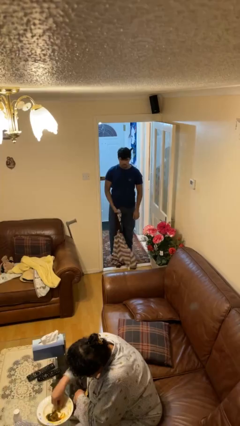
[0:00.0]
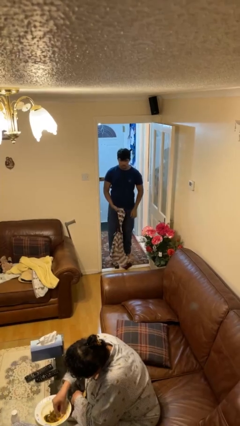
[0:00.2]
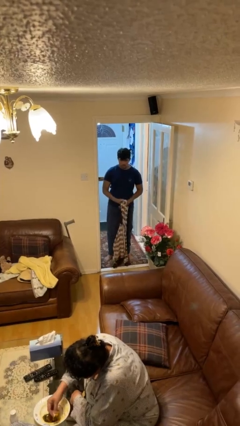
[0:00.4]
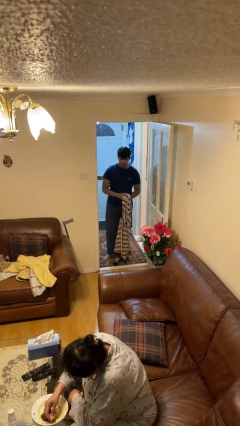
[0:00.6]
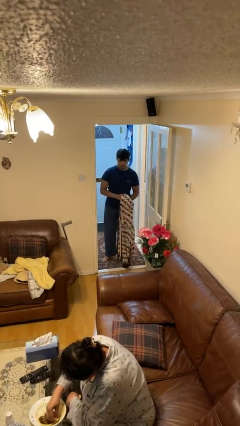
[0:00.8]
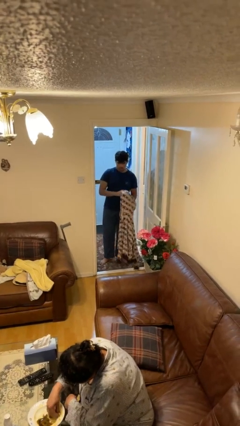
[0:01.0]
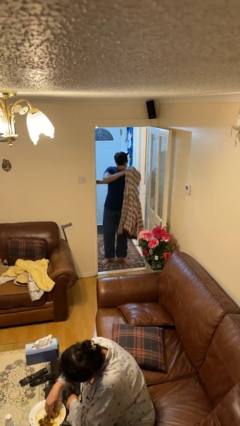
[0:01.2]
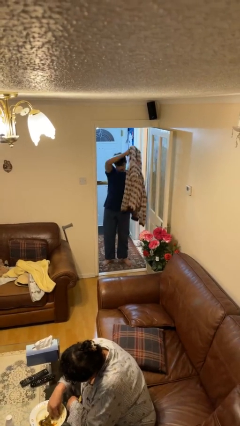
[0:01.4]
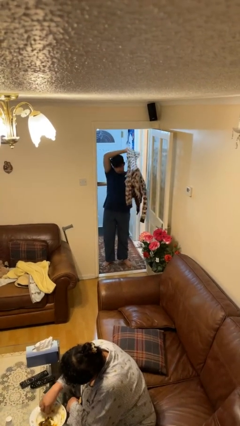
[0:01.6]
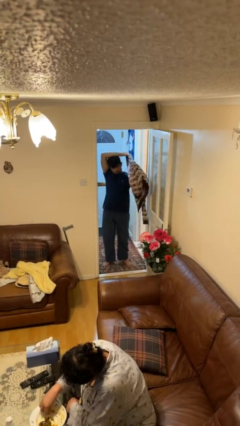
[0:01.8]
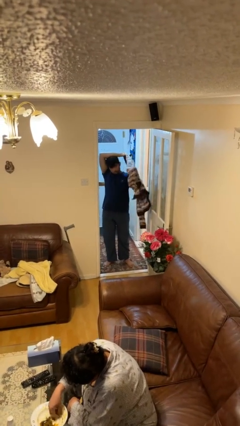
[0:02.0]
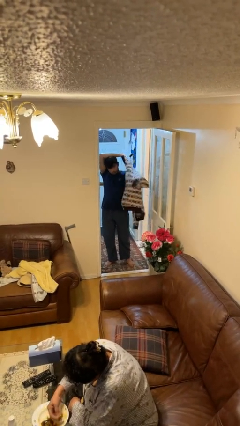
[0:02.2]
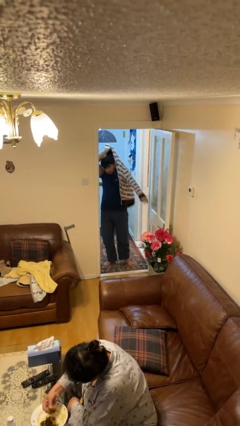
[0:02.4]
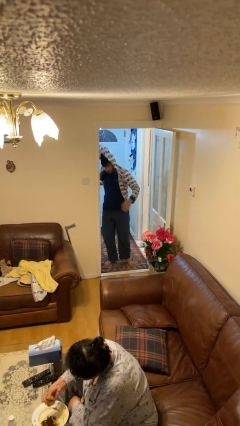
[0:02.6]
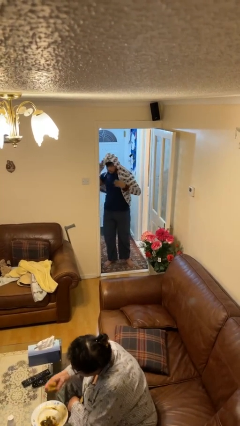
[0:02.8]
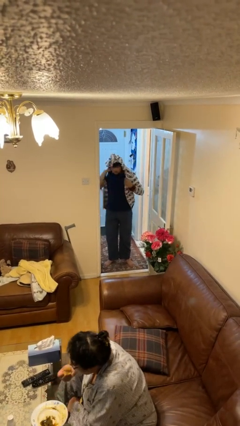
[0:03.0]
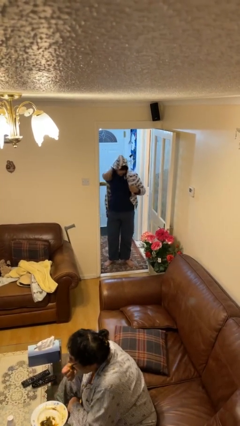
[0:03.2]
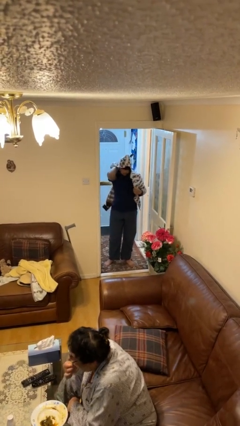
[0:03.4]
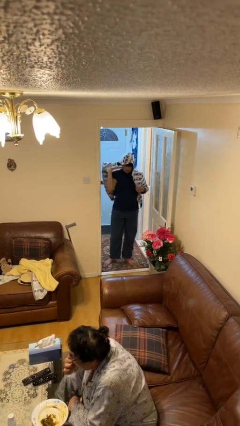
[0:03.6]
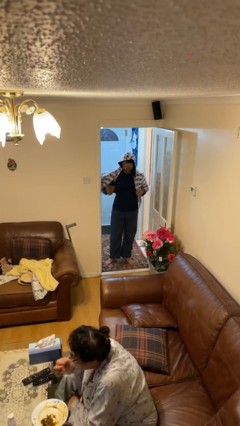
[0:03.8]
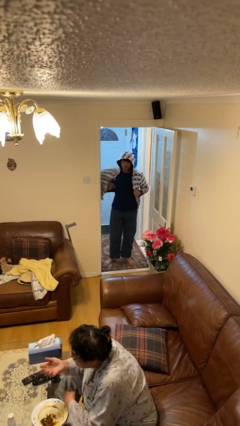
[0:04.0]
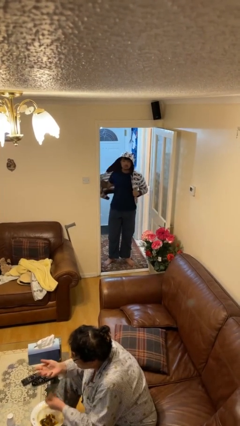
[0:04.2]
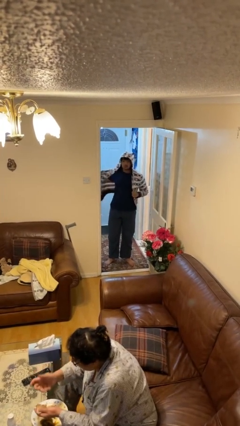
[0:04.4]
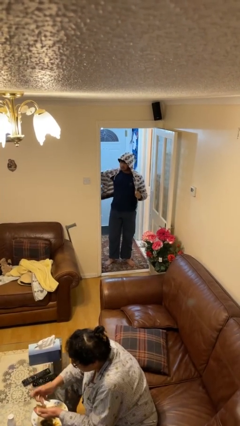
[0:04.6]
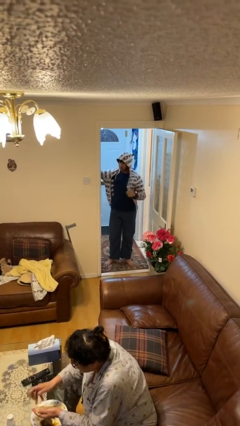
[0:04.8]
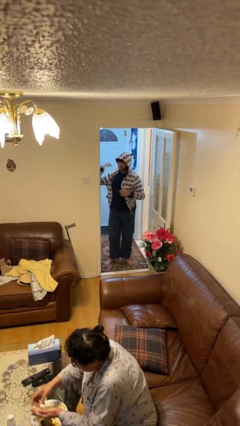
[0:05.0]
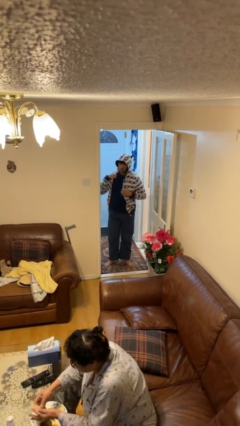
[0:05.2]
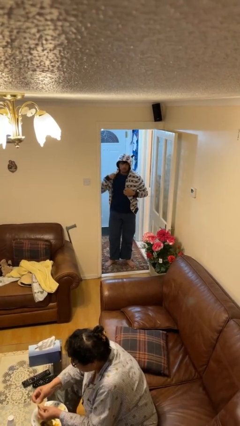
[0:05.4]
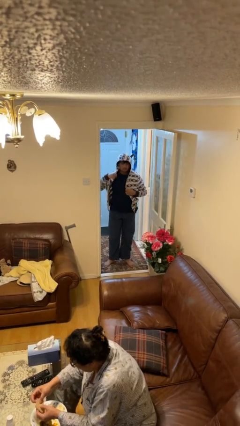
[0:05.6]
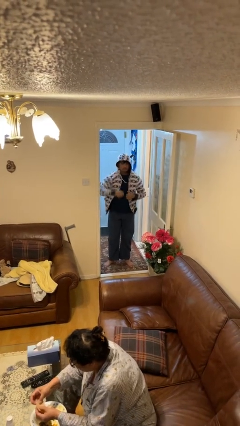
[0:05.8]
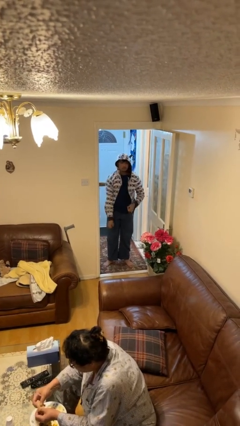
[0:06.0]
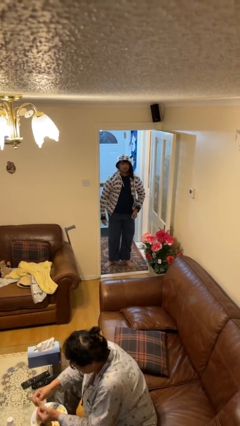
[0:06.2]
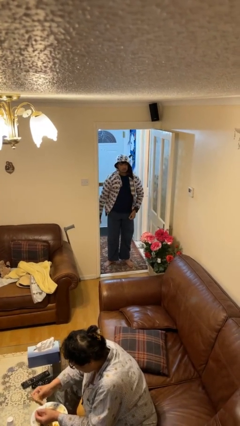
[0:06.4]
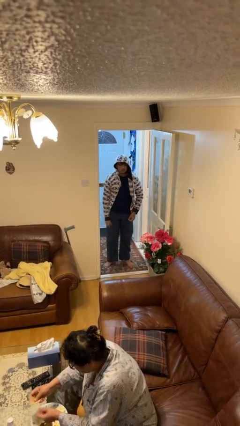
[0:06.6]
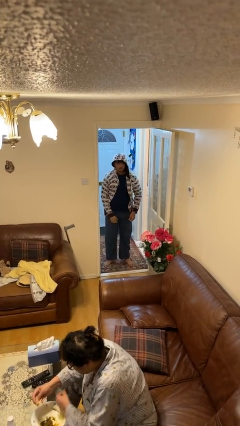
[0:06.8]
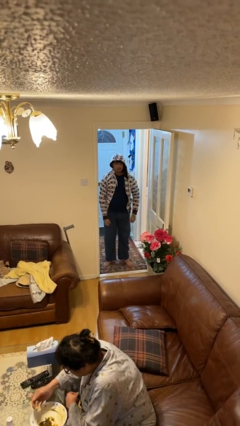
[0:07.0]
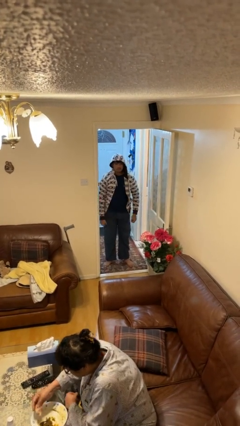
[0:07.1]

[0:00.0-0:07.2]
person puts on hoodie

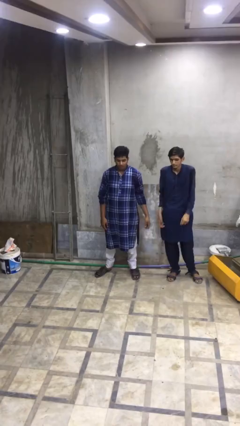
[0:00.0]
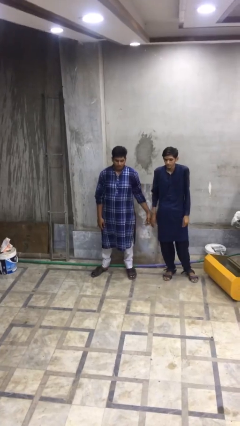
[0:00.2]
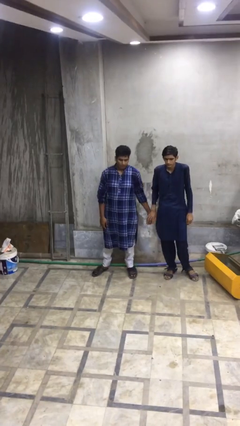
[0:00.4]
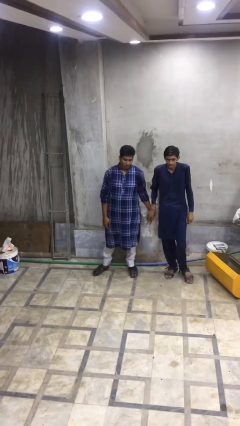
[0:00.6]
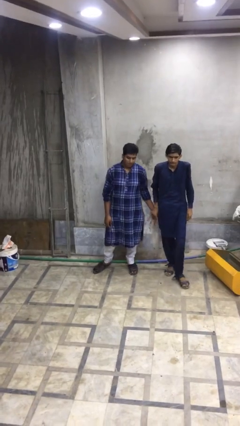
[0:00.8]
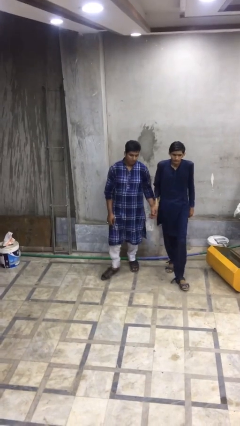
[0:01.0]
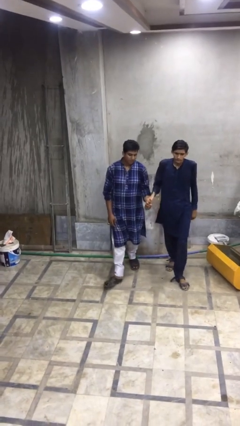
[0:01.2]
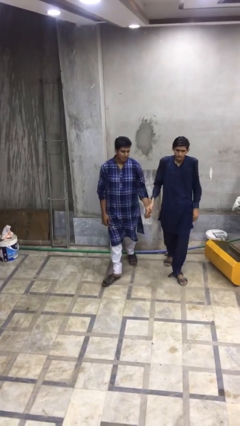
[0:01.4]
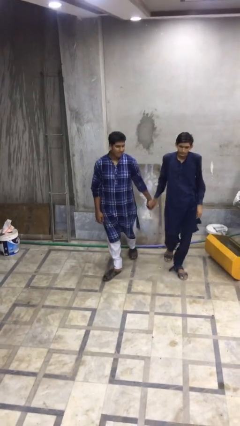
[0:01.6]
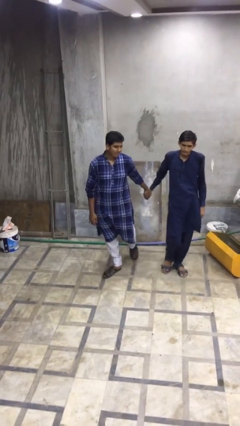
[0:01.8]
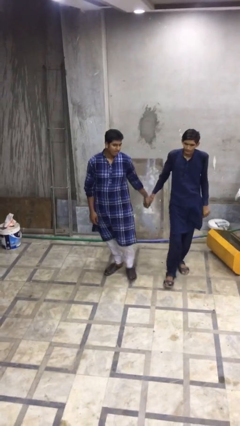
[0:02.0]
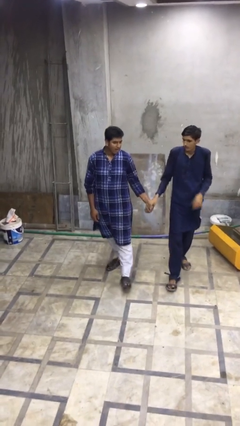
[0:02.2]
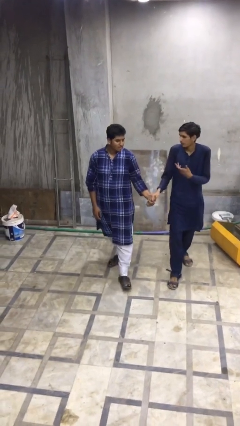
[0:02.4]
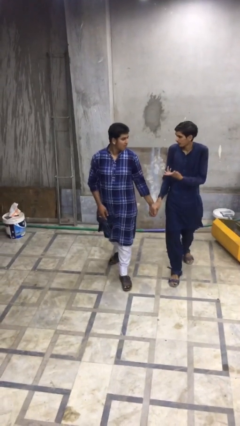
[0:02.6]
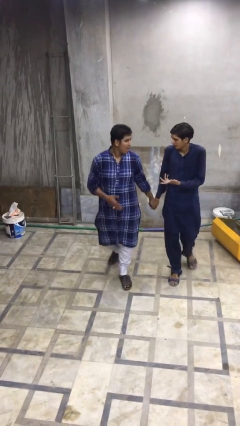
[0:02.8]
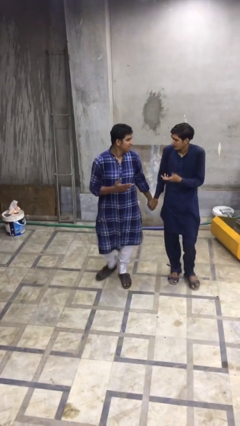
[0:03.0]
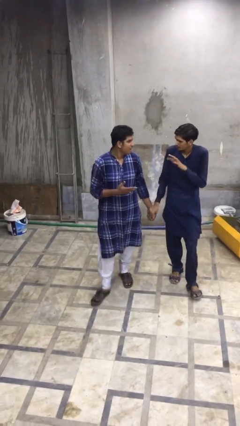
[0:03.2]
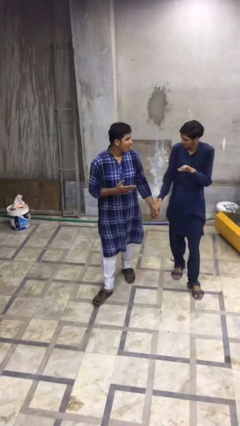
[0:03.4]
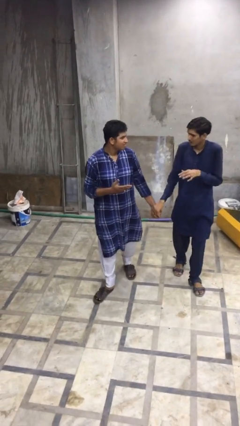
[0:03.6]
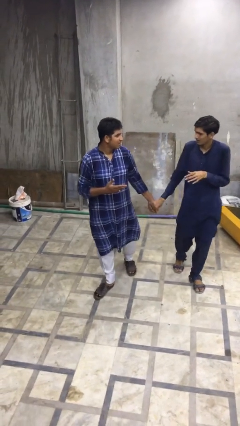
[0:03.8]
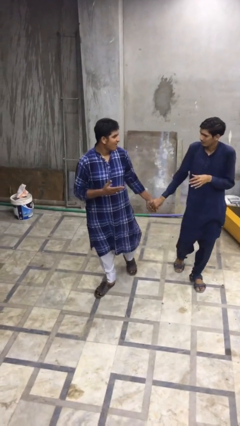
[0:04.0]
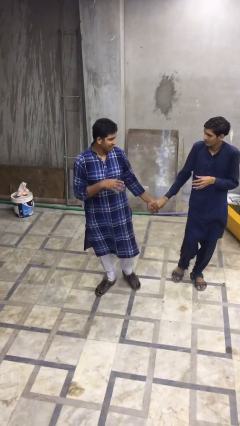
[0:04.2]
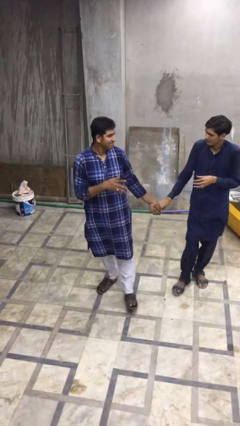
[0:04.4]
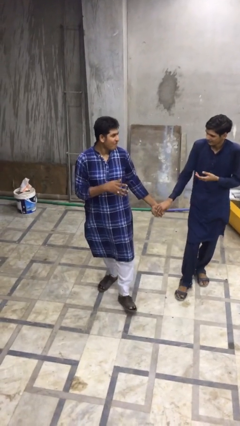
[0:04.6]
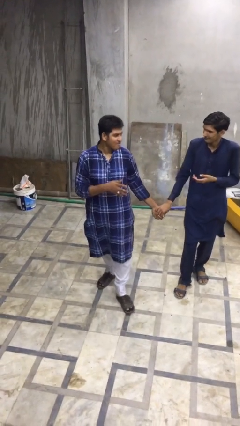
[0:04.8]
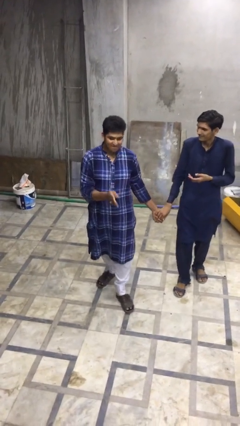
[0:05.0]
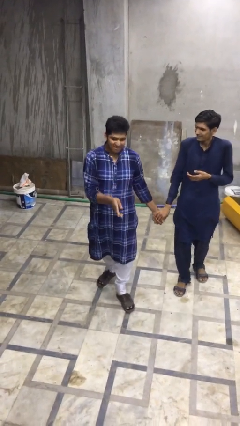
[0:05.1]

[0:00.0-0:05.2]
person holds hand

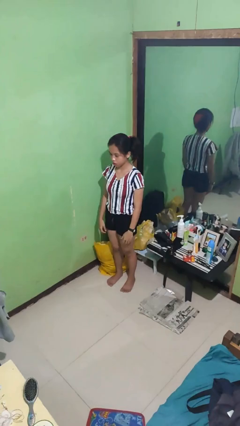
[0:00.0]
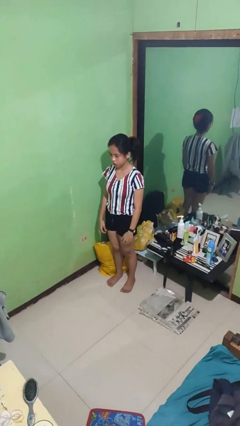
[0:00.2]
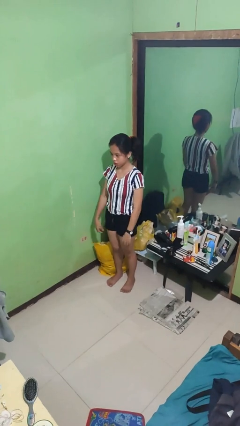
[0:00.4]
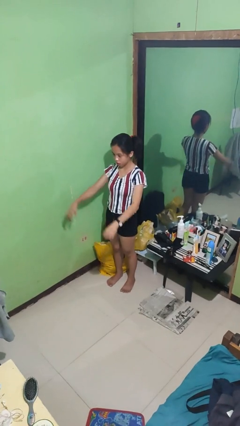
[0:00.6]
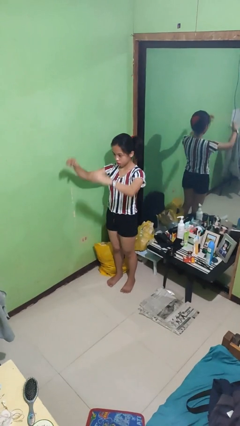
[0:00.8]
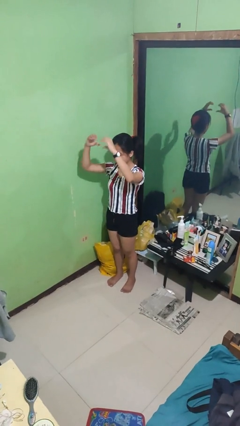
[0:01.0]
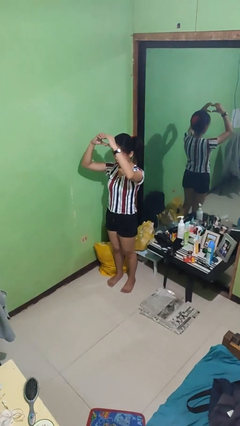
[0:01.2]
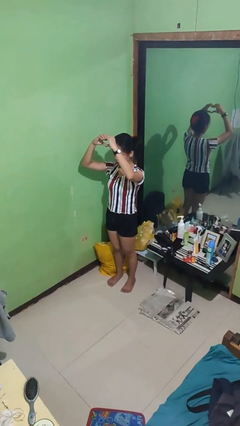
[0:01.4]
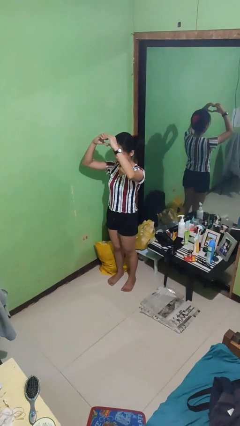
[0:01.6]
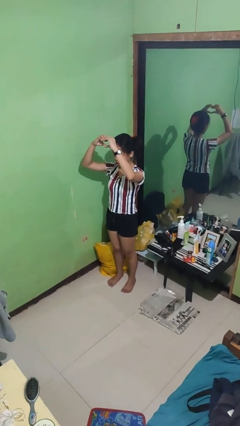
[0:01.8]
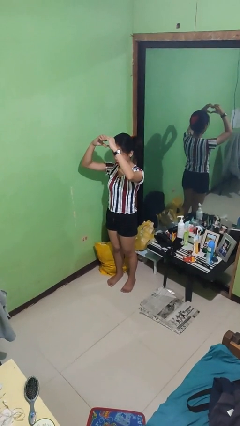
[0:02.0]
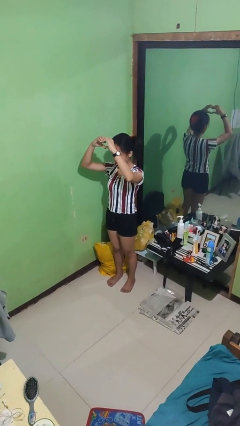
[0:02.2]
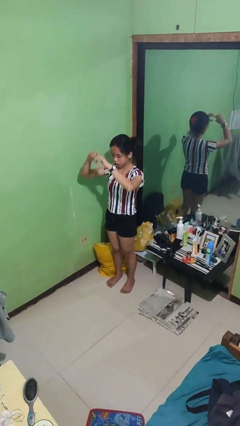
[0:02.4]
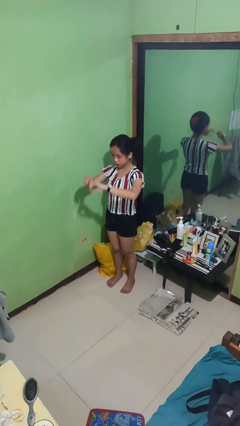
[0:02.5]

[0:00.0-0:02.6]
person gestures heart

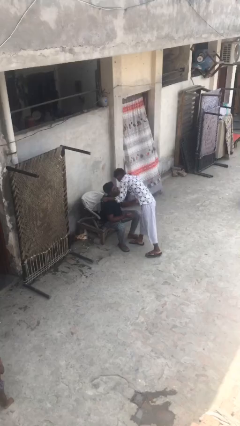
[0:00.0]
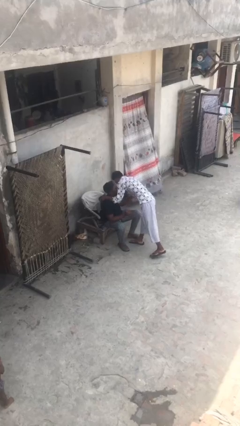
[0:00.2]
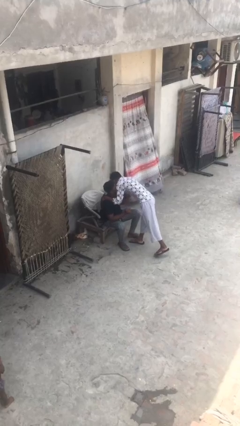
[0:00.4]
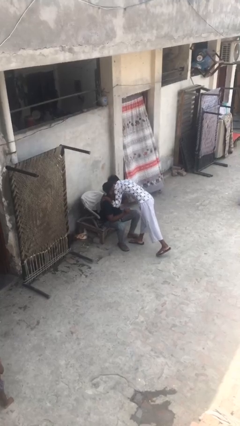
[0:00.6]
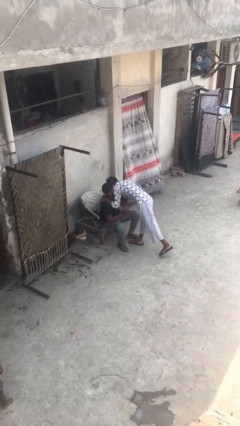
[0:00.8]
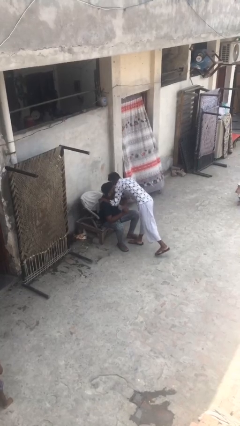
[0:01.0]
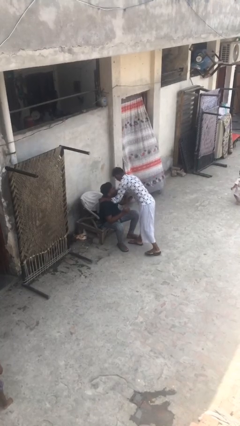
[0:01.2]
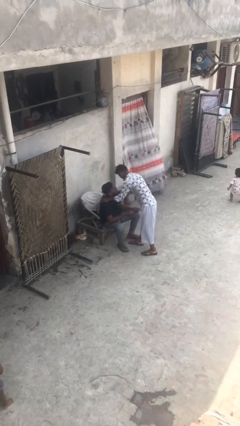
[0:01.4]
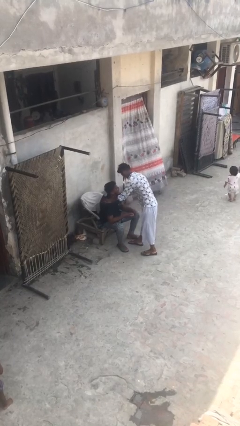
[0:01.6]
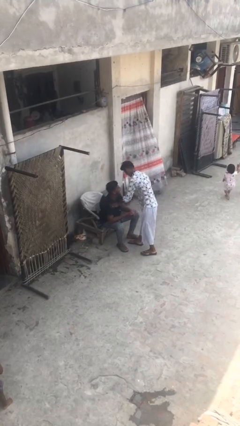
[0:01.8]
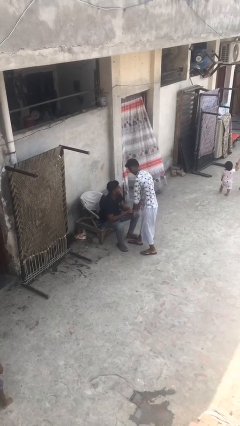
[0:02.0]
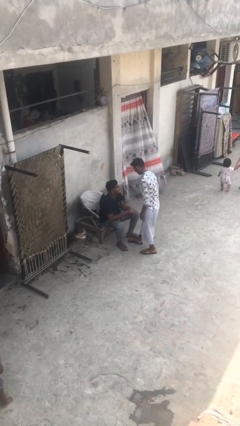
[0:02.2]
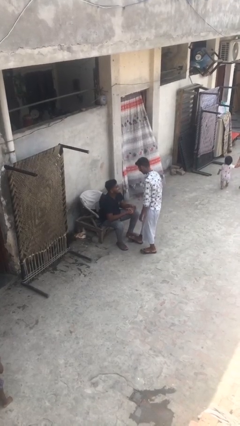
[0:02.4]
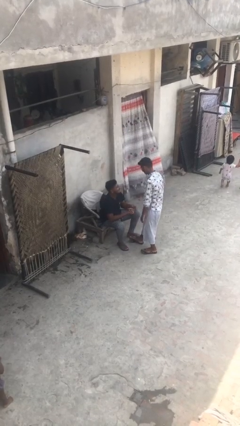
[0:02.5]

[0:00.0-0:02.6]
person embraces person

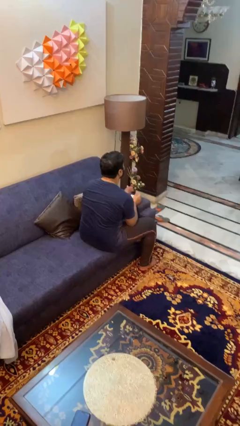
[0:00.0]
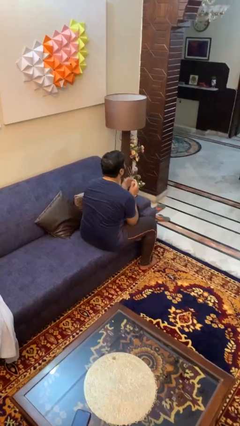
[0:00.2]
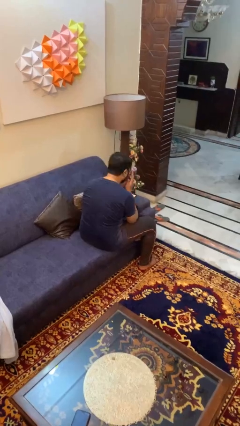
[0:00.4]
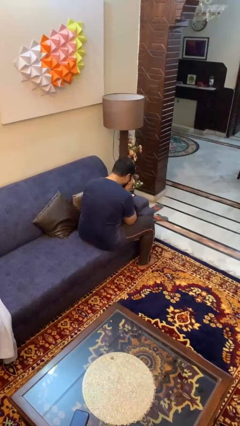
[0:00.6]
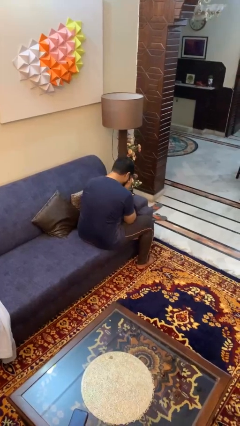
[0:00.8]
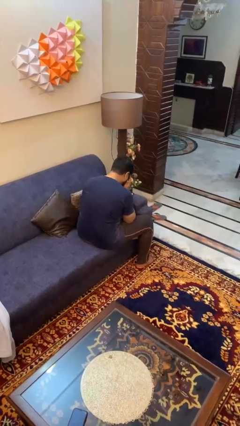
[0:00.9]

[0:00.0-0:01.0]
person sneezes into hand
